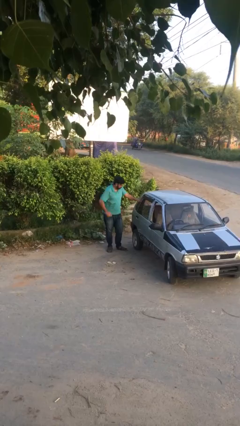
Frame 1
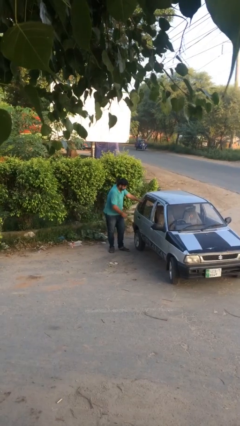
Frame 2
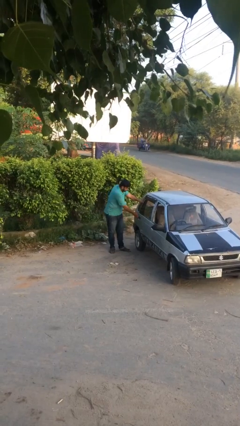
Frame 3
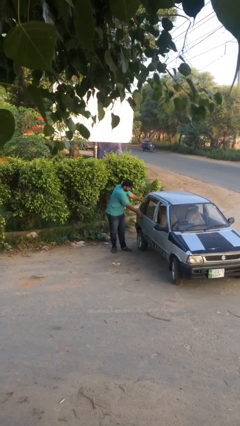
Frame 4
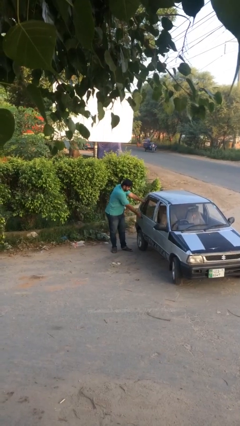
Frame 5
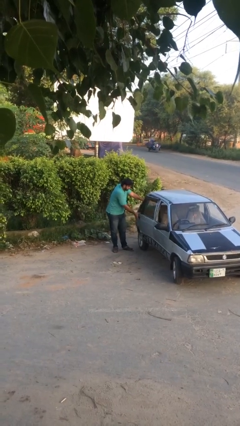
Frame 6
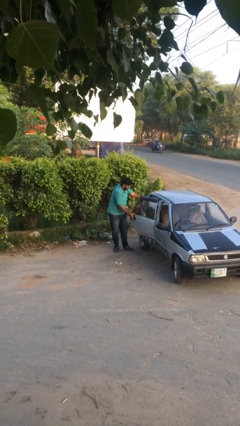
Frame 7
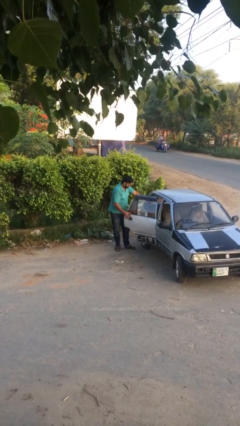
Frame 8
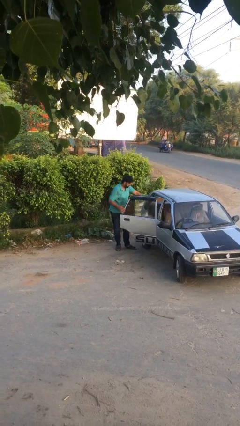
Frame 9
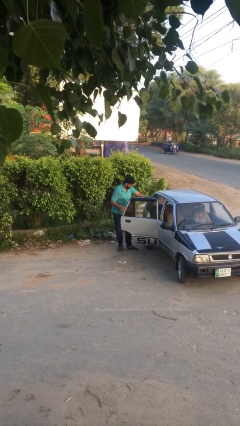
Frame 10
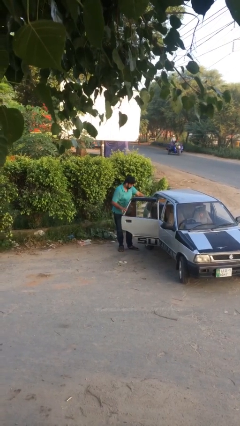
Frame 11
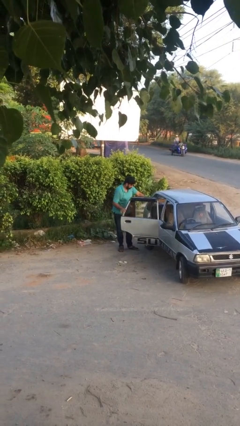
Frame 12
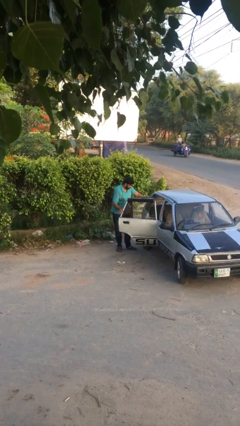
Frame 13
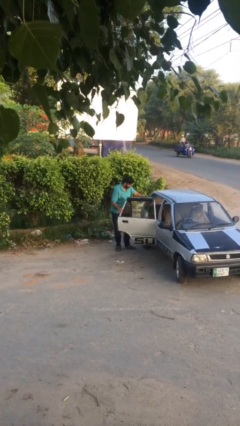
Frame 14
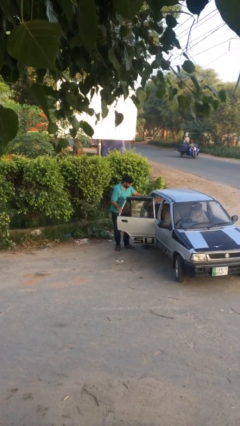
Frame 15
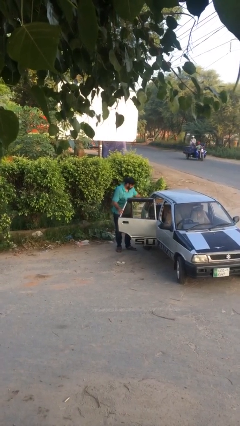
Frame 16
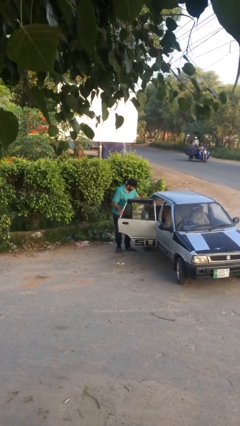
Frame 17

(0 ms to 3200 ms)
person opens car door

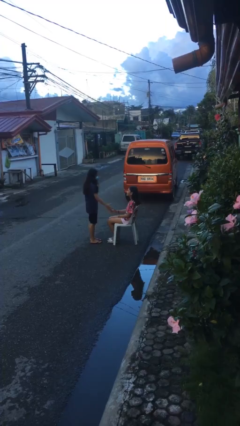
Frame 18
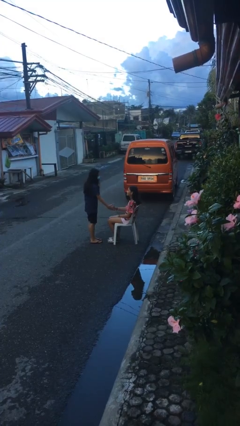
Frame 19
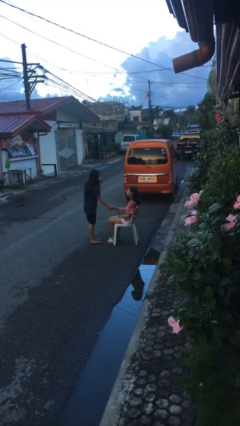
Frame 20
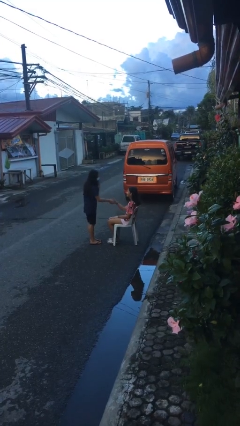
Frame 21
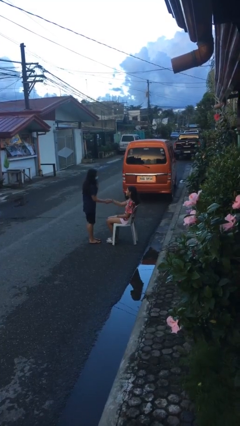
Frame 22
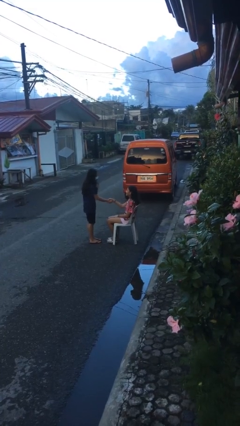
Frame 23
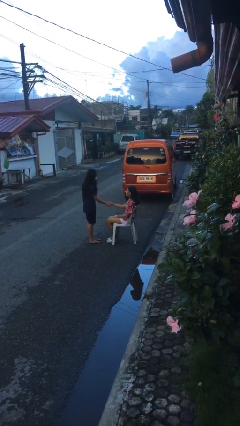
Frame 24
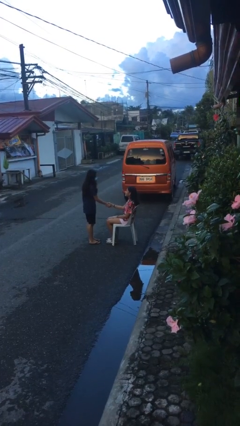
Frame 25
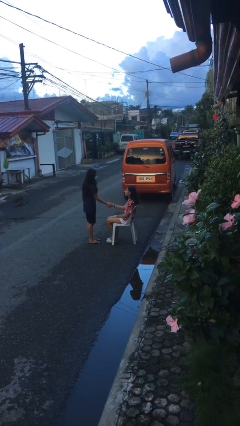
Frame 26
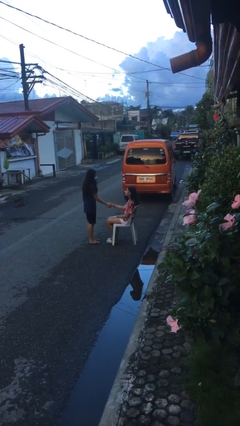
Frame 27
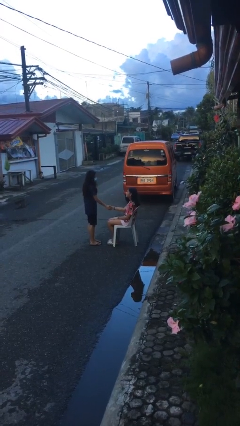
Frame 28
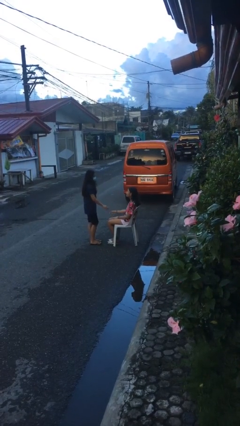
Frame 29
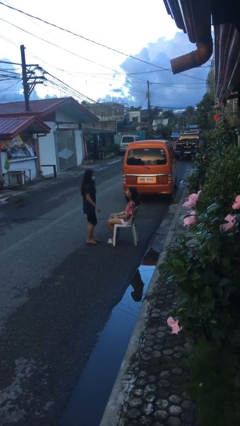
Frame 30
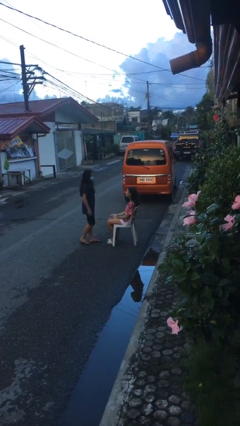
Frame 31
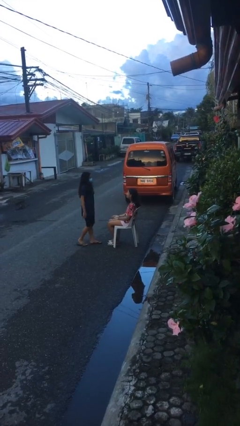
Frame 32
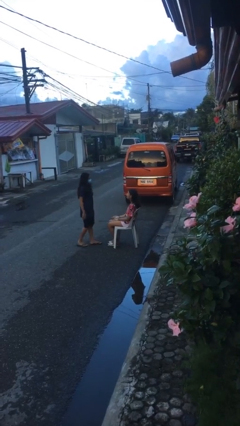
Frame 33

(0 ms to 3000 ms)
person shakes hand

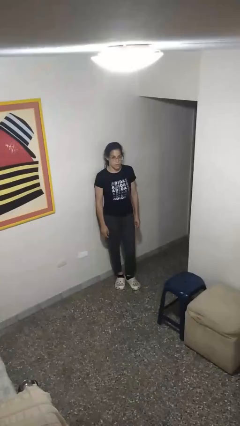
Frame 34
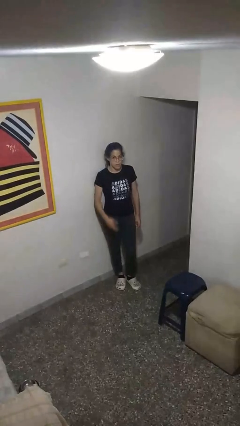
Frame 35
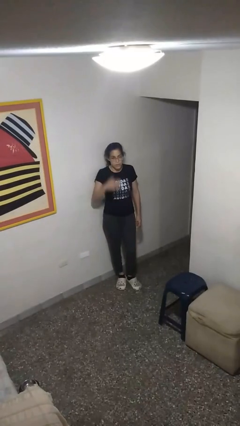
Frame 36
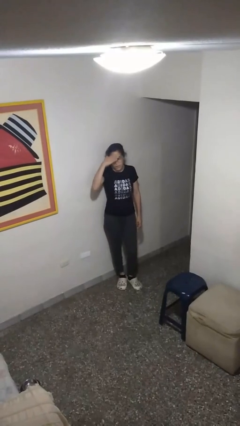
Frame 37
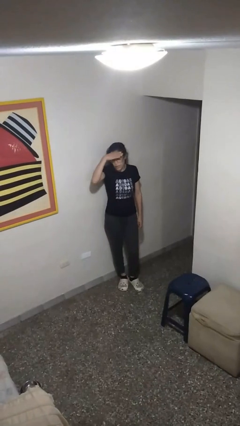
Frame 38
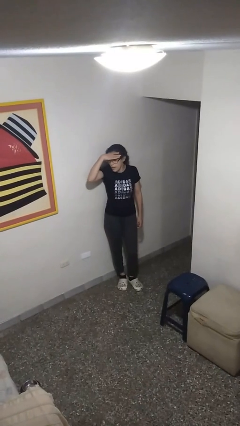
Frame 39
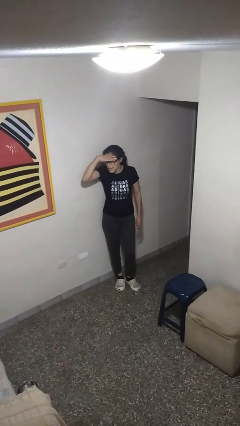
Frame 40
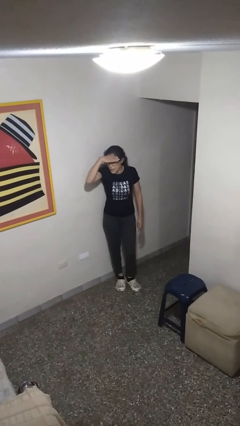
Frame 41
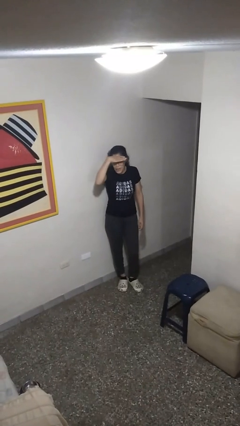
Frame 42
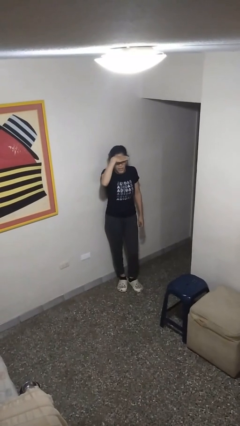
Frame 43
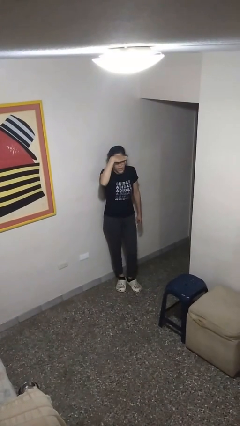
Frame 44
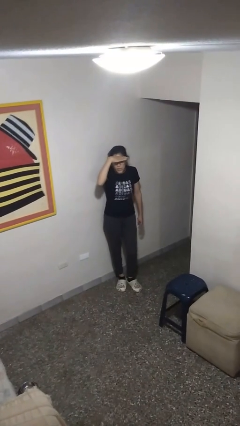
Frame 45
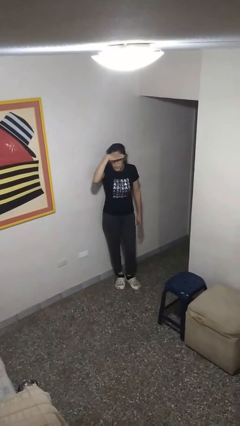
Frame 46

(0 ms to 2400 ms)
person shades eyes

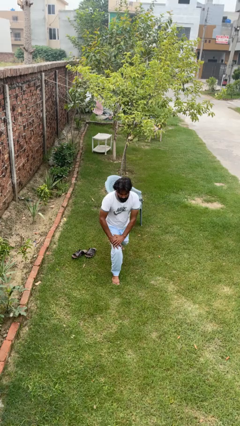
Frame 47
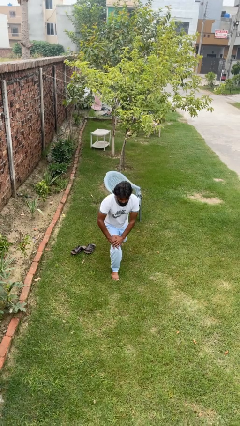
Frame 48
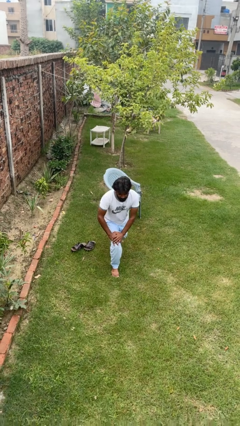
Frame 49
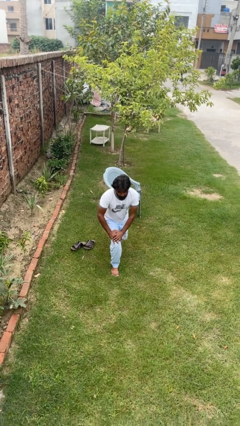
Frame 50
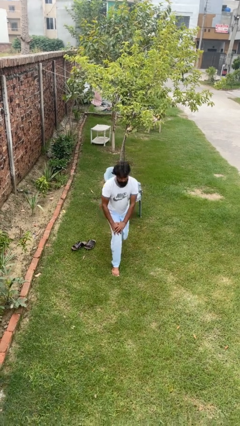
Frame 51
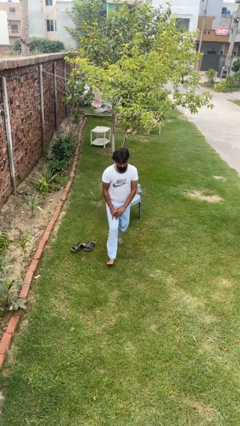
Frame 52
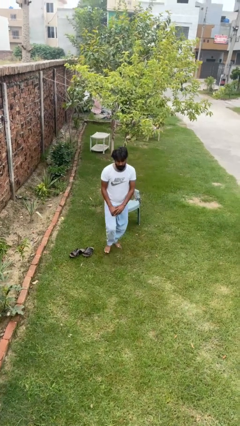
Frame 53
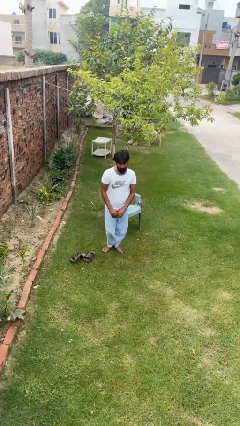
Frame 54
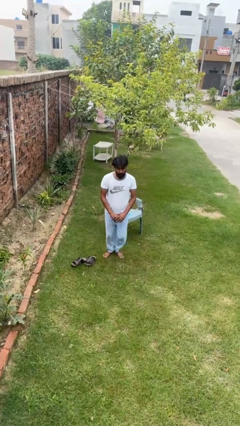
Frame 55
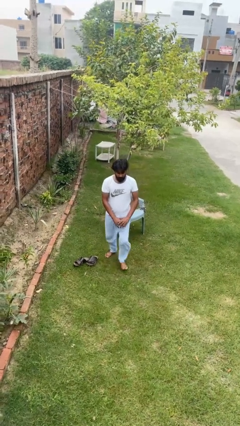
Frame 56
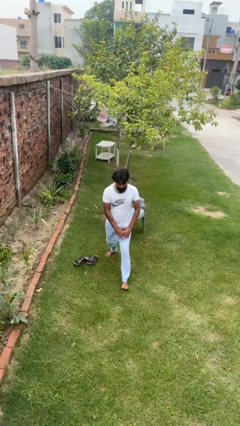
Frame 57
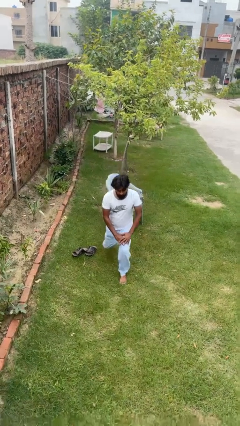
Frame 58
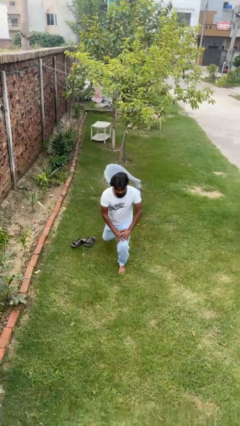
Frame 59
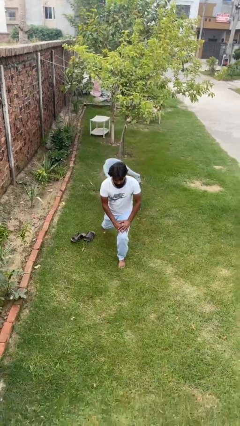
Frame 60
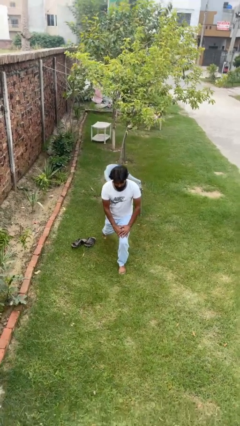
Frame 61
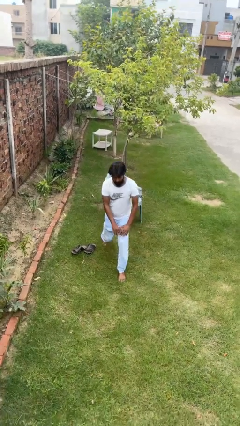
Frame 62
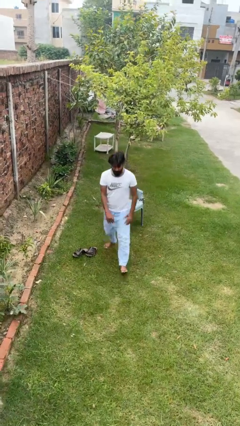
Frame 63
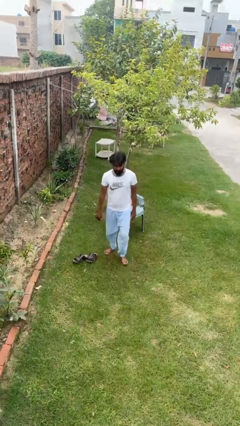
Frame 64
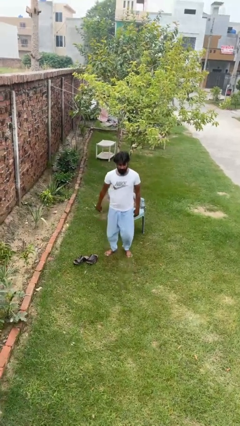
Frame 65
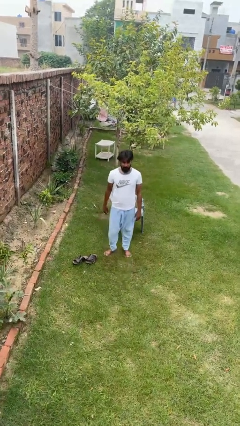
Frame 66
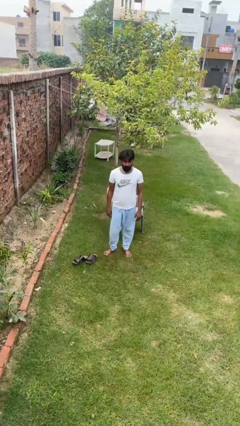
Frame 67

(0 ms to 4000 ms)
person exercises with lunges

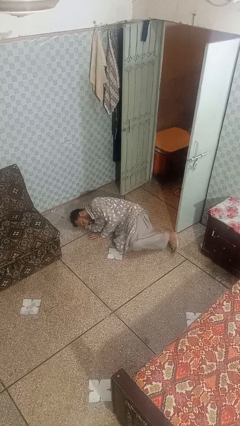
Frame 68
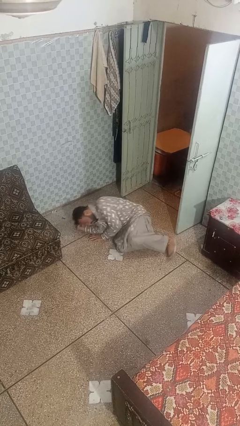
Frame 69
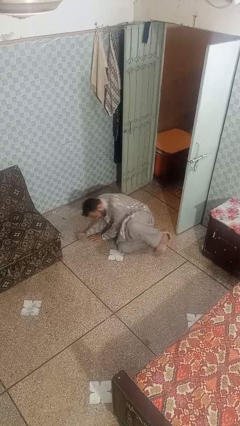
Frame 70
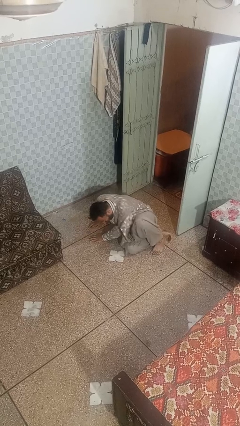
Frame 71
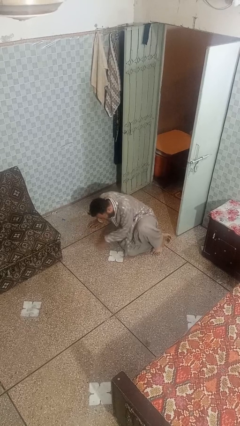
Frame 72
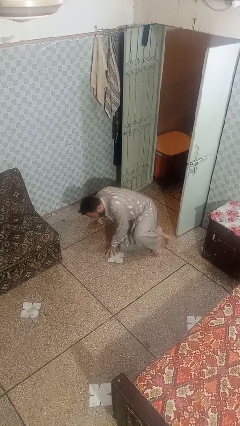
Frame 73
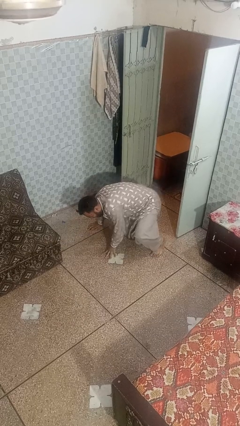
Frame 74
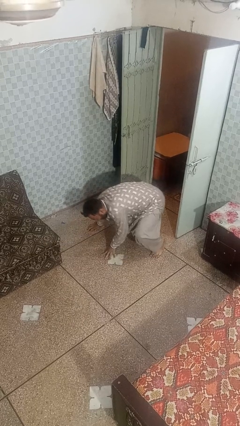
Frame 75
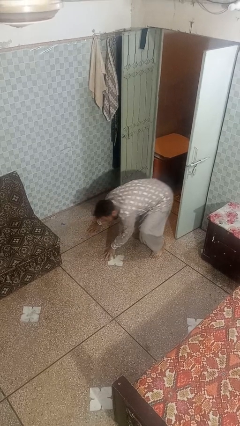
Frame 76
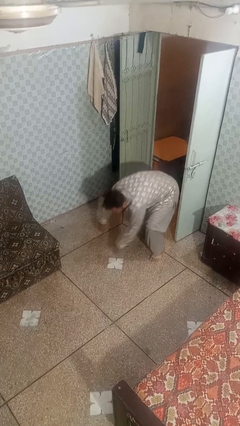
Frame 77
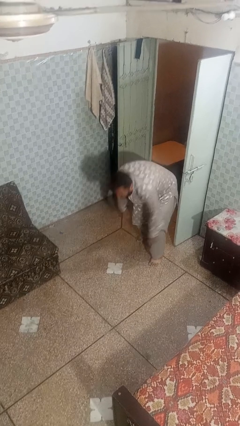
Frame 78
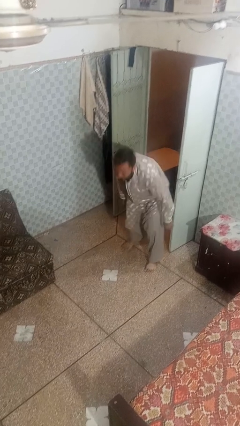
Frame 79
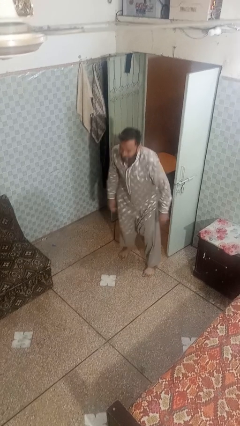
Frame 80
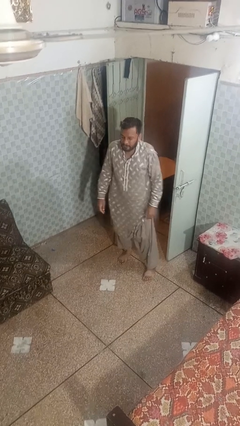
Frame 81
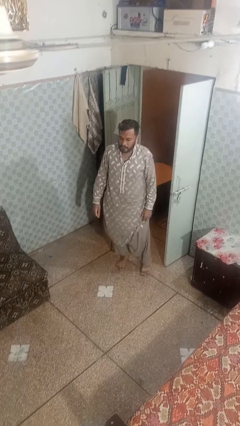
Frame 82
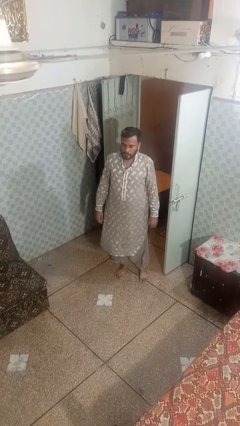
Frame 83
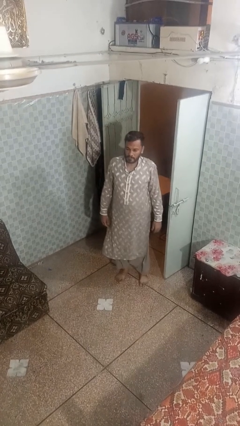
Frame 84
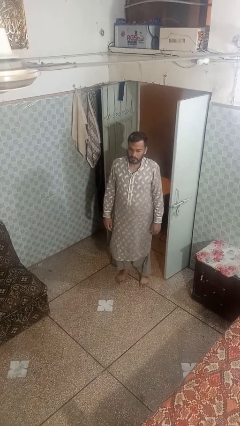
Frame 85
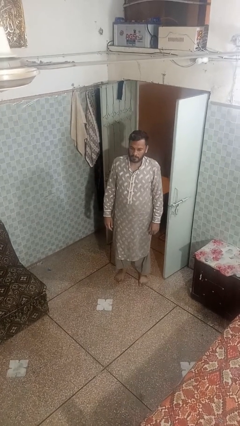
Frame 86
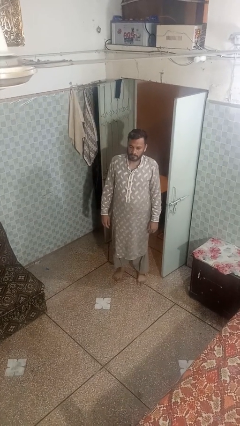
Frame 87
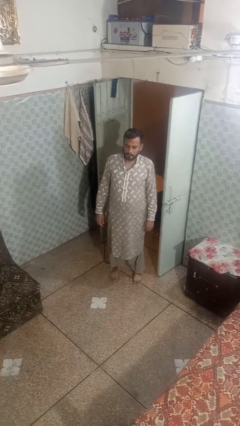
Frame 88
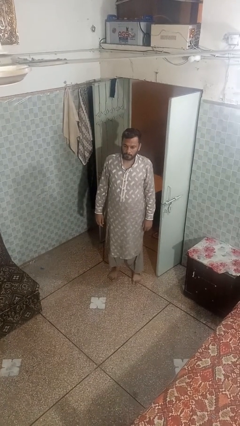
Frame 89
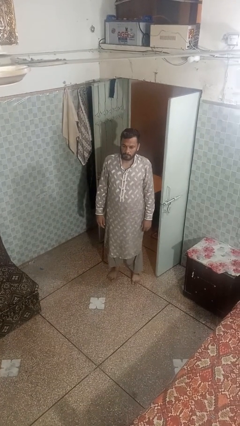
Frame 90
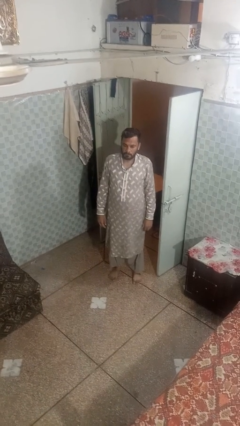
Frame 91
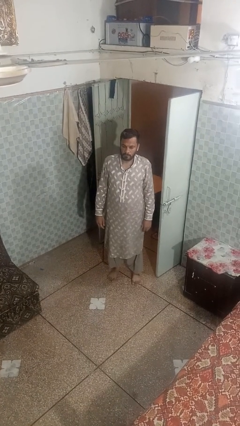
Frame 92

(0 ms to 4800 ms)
person stands up from floor
